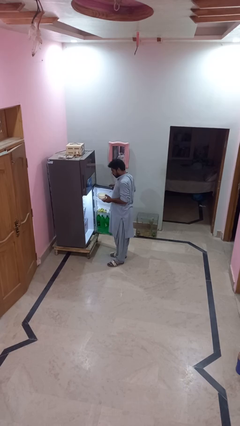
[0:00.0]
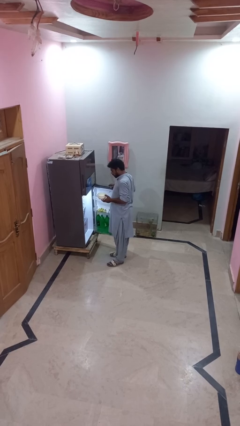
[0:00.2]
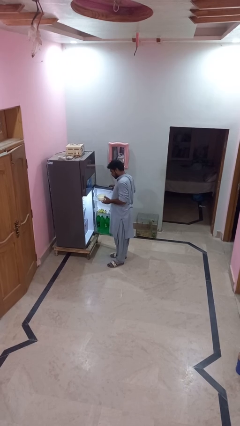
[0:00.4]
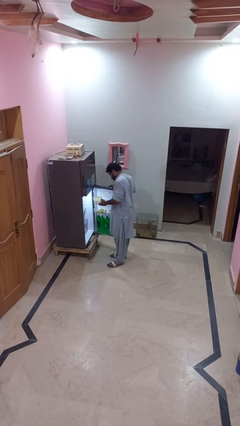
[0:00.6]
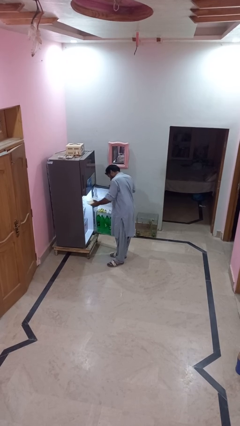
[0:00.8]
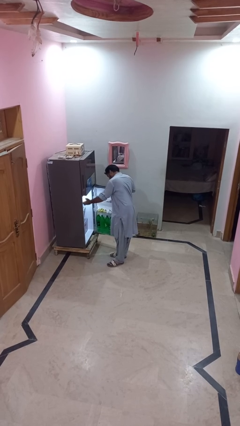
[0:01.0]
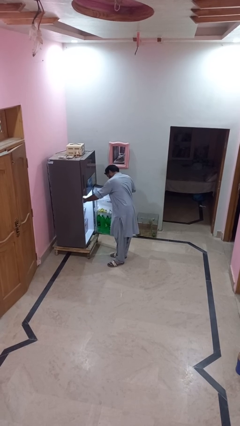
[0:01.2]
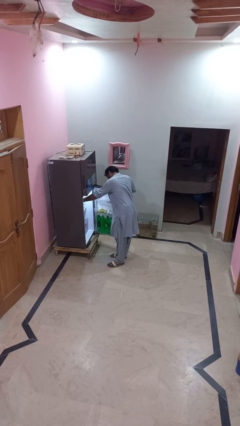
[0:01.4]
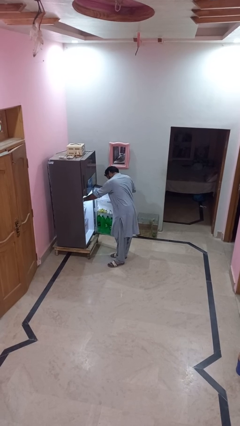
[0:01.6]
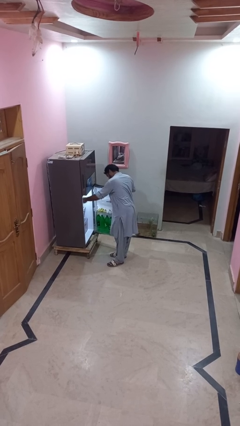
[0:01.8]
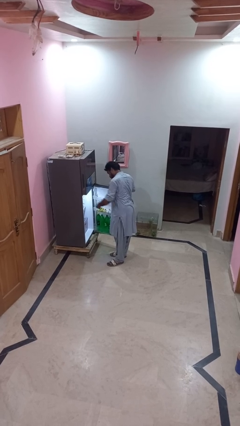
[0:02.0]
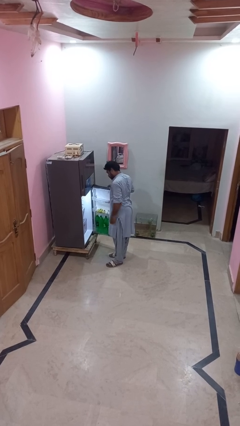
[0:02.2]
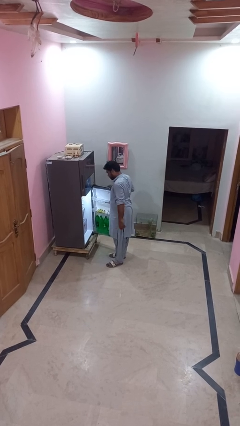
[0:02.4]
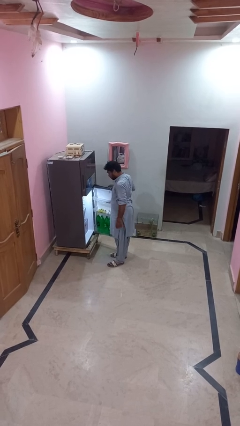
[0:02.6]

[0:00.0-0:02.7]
person puts object into refrigerator

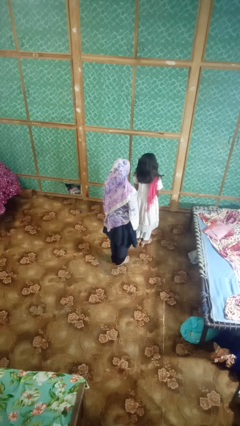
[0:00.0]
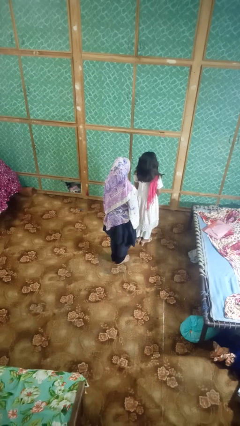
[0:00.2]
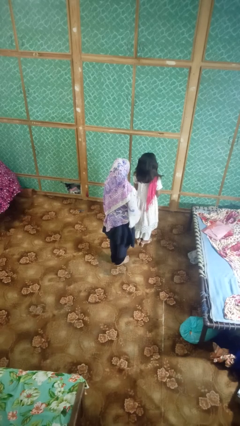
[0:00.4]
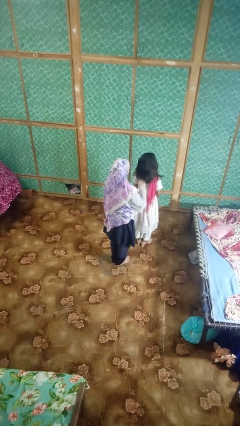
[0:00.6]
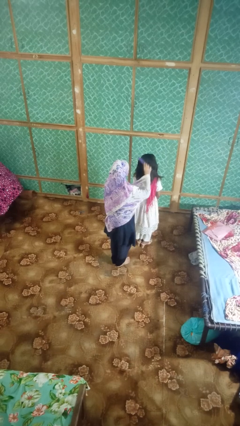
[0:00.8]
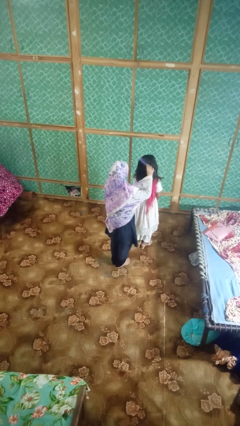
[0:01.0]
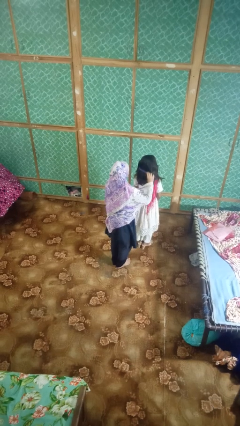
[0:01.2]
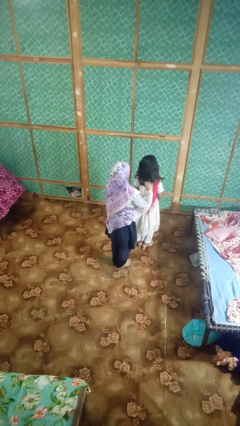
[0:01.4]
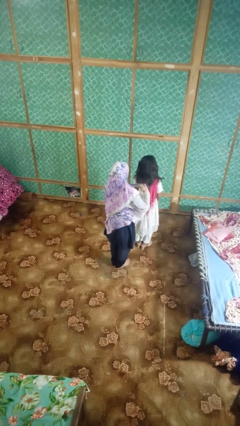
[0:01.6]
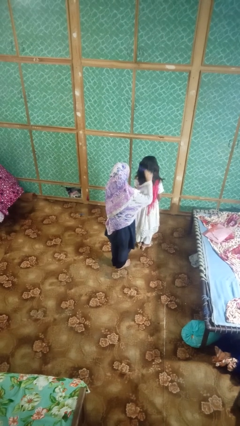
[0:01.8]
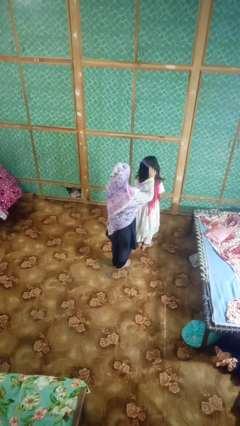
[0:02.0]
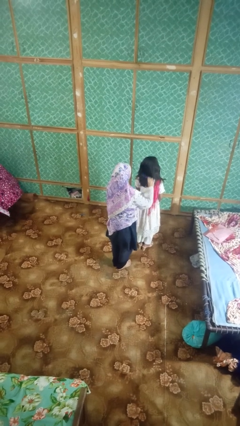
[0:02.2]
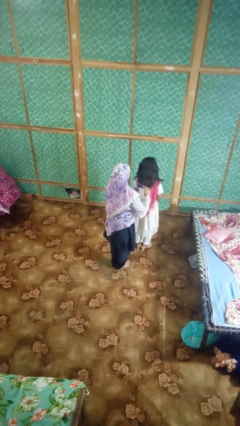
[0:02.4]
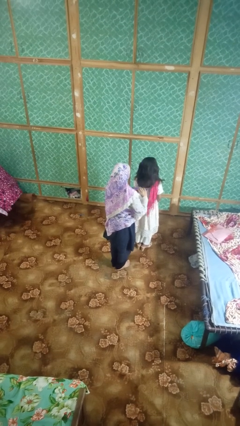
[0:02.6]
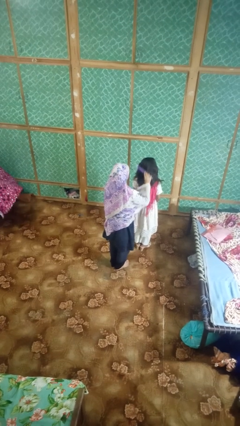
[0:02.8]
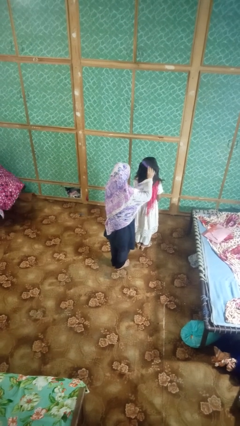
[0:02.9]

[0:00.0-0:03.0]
person brushes hair of person

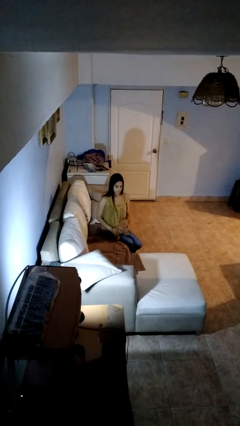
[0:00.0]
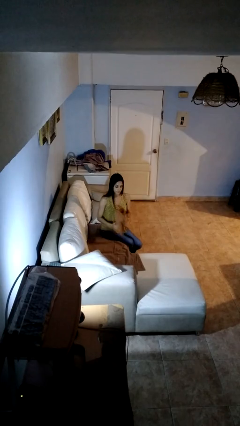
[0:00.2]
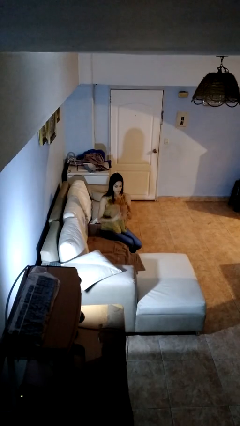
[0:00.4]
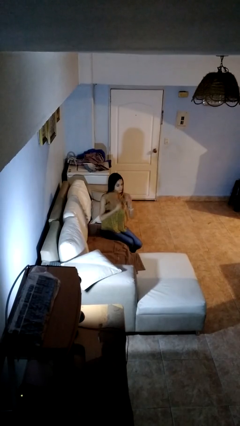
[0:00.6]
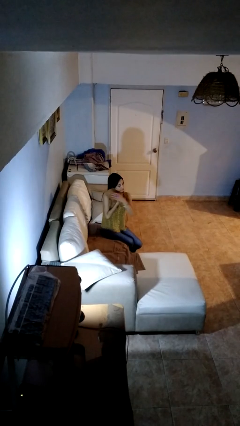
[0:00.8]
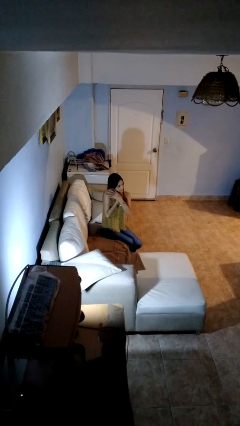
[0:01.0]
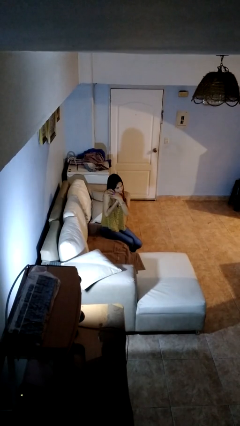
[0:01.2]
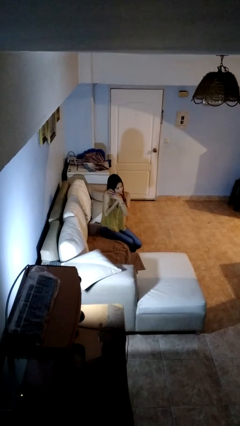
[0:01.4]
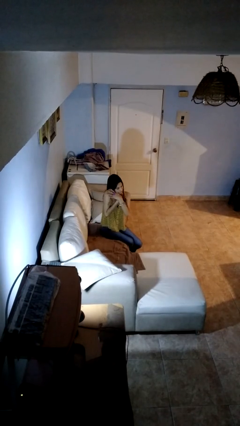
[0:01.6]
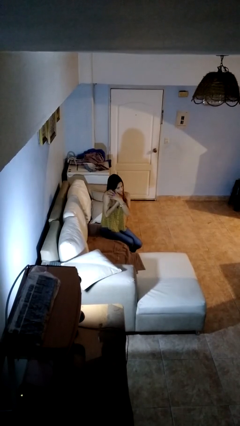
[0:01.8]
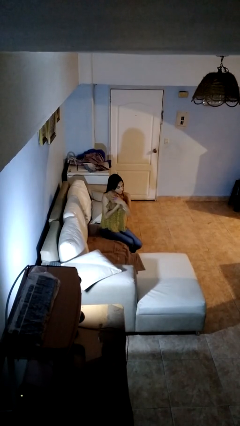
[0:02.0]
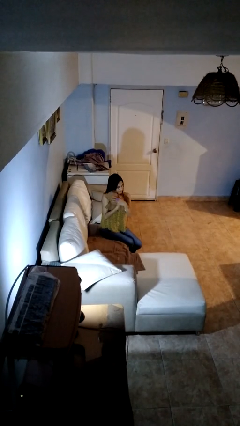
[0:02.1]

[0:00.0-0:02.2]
person hugs stuffed animal

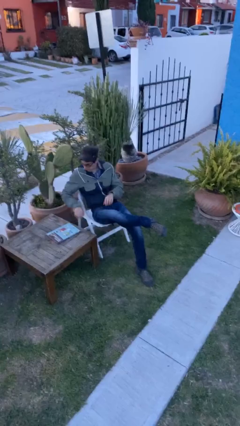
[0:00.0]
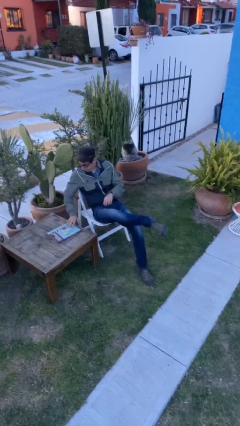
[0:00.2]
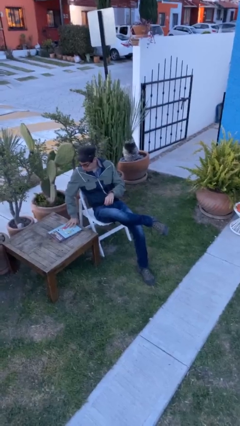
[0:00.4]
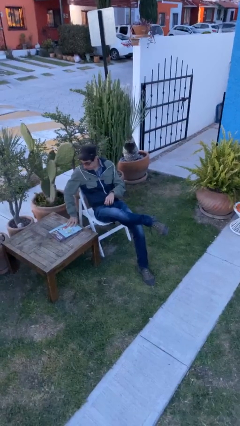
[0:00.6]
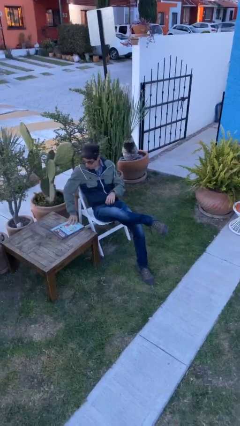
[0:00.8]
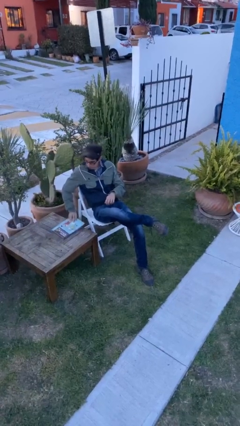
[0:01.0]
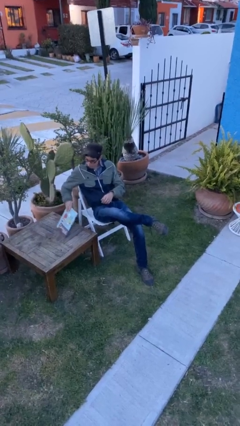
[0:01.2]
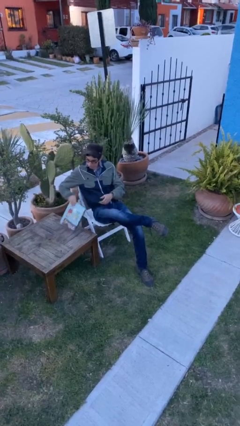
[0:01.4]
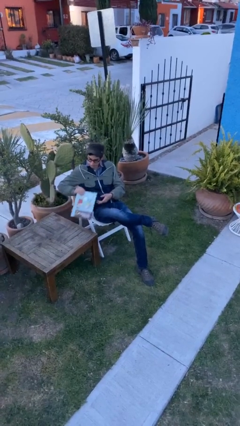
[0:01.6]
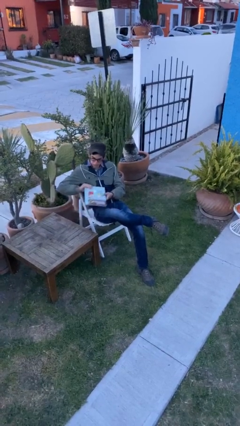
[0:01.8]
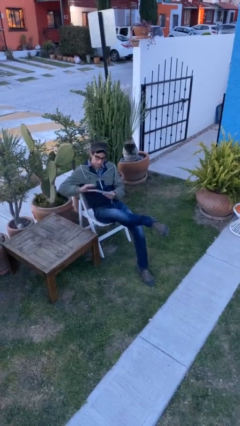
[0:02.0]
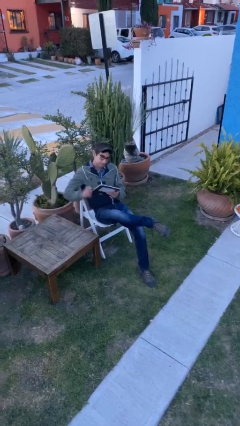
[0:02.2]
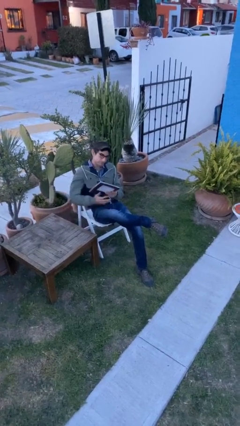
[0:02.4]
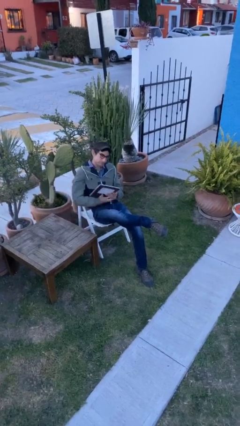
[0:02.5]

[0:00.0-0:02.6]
person picks up object from table

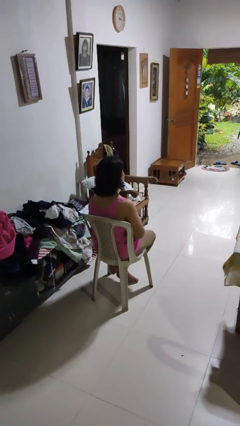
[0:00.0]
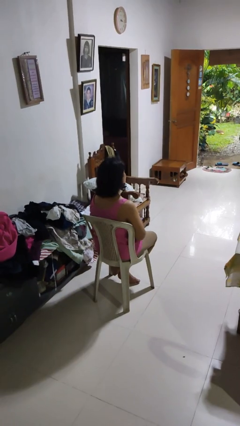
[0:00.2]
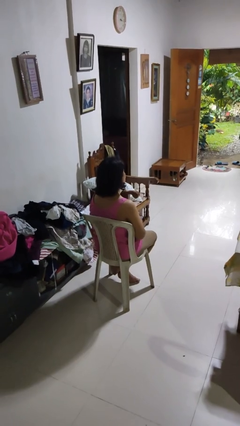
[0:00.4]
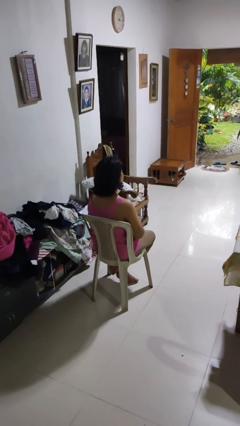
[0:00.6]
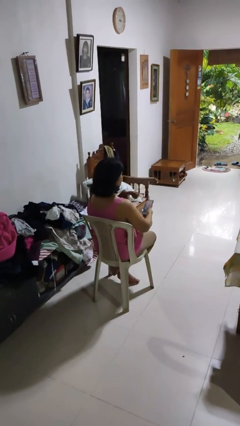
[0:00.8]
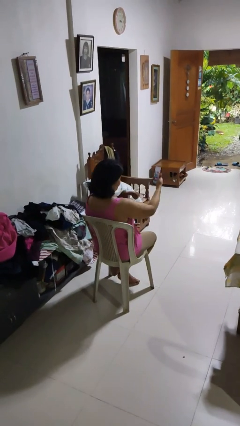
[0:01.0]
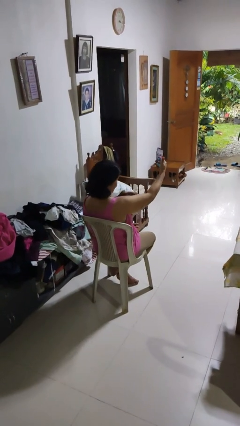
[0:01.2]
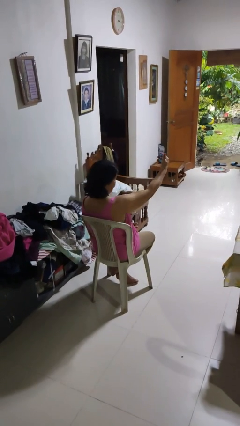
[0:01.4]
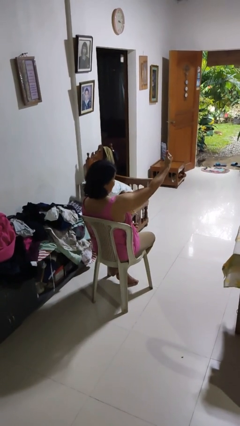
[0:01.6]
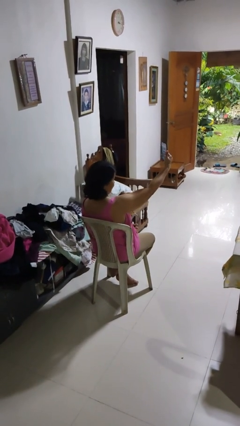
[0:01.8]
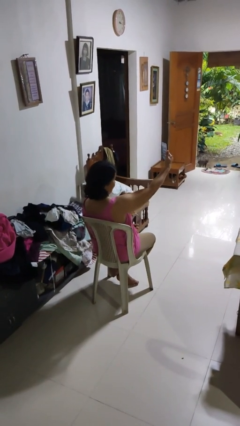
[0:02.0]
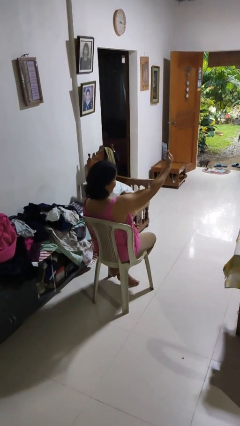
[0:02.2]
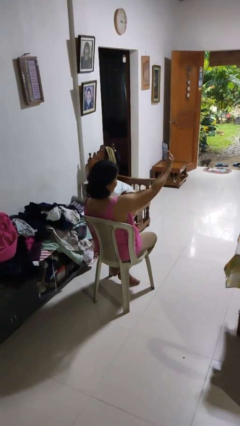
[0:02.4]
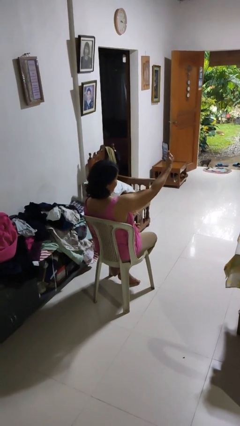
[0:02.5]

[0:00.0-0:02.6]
person takes selfie

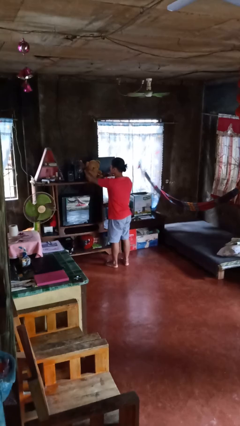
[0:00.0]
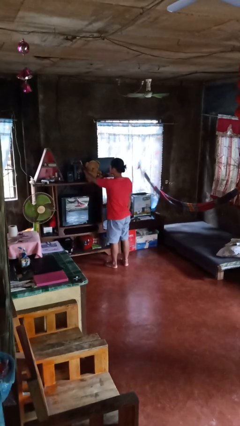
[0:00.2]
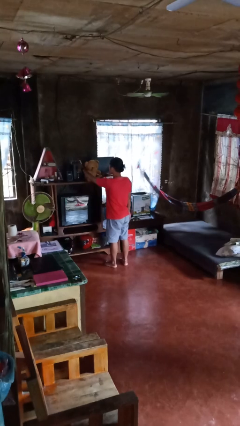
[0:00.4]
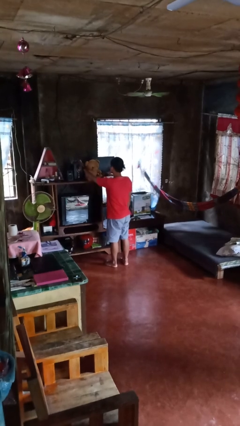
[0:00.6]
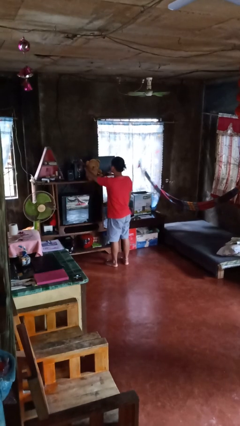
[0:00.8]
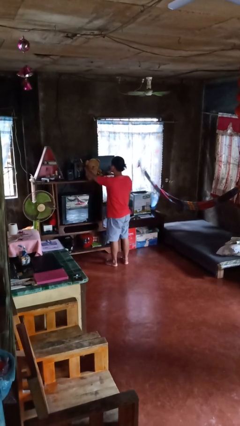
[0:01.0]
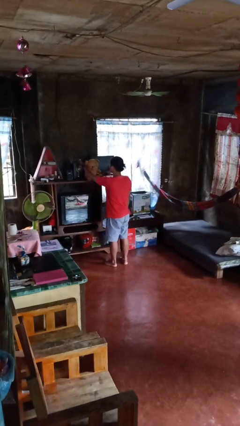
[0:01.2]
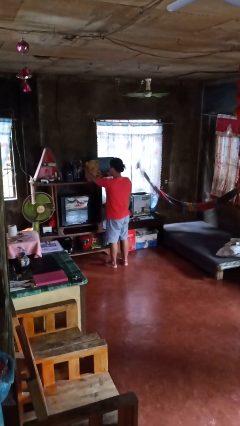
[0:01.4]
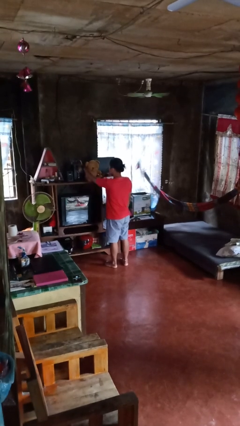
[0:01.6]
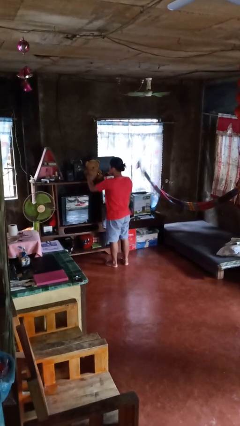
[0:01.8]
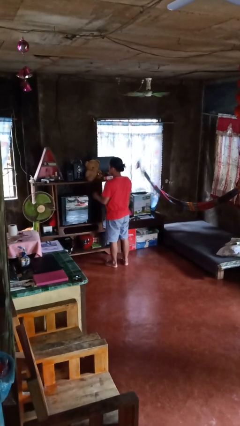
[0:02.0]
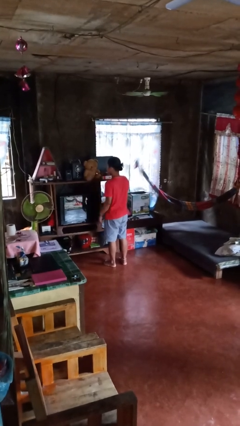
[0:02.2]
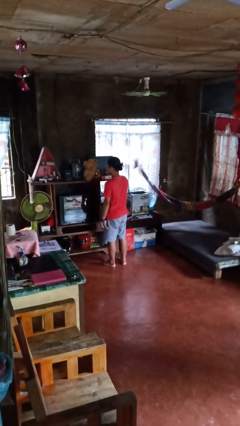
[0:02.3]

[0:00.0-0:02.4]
person taps object with finger

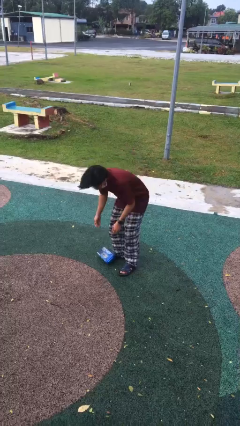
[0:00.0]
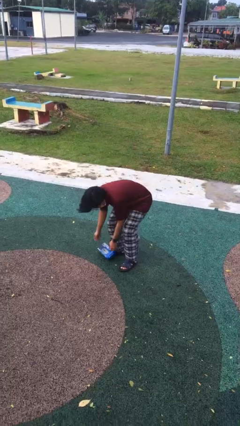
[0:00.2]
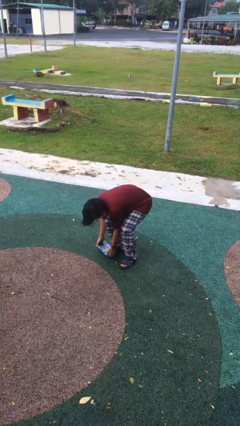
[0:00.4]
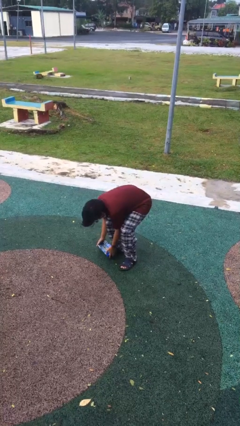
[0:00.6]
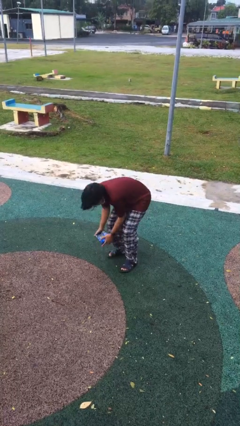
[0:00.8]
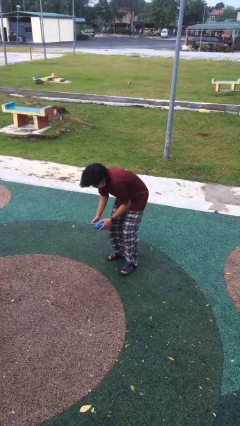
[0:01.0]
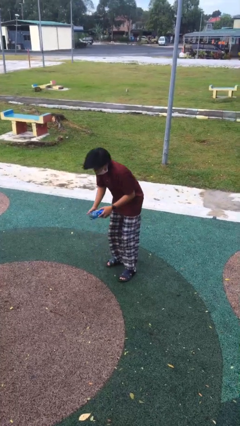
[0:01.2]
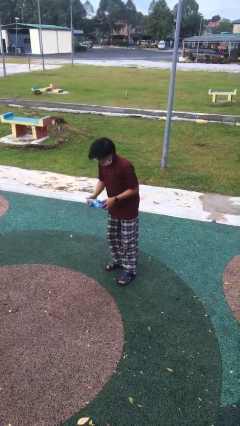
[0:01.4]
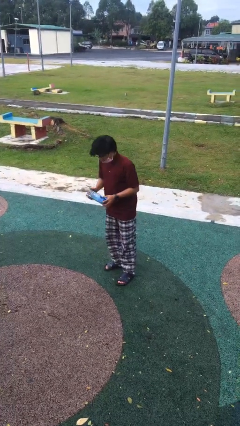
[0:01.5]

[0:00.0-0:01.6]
person picks up object from floor
